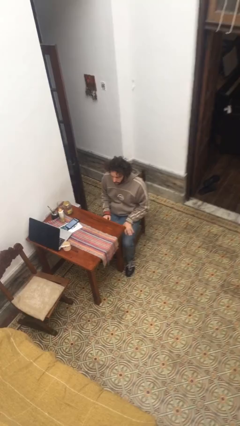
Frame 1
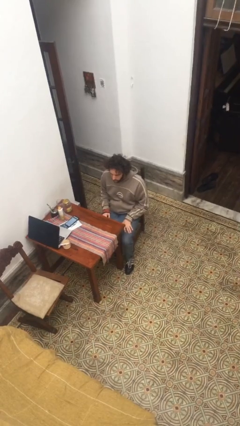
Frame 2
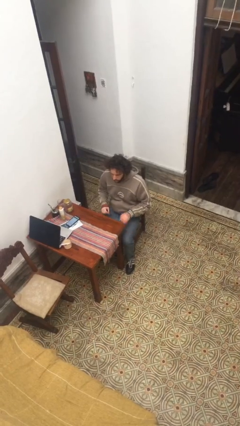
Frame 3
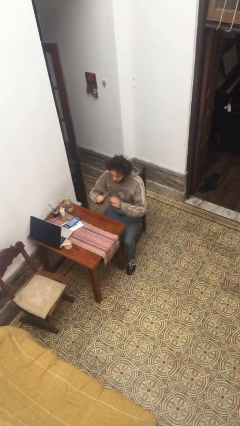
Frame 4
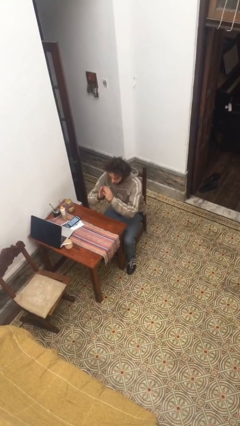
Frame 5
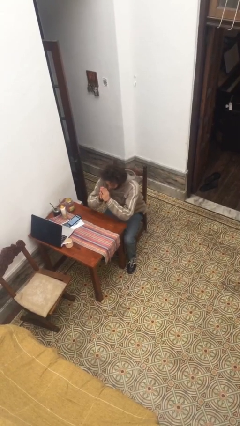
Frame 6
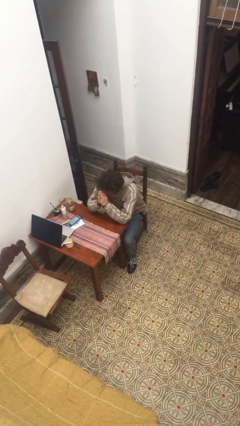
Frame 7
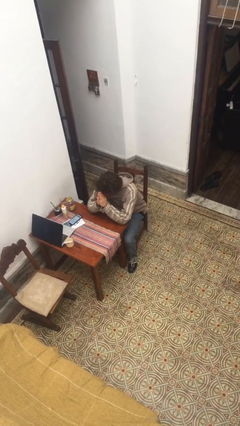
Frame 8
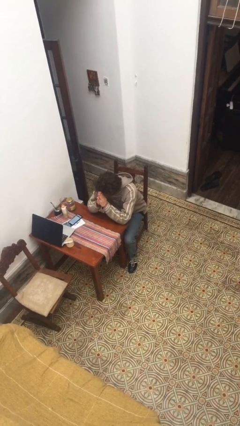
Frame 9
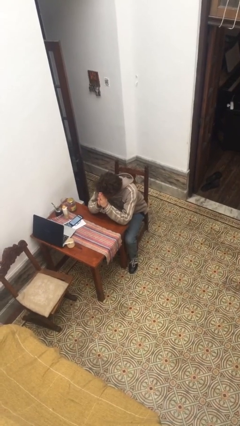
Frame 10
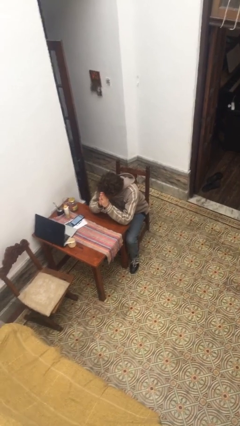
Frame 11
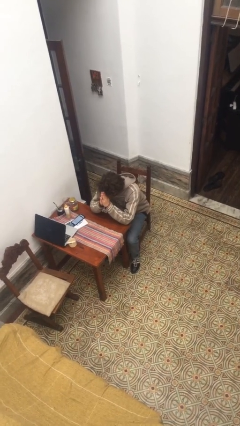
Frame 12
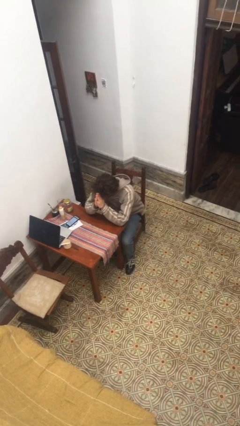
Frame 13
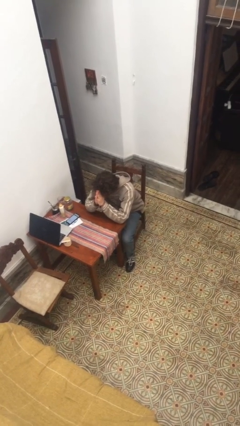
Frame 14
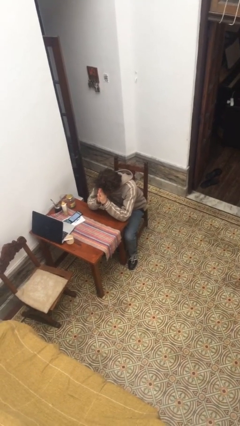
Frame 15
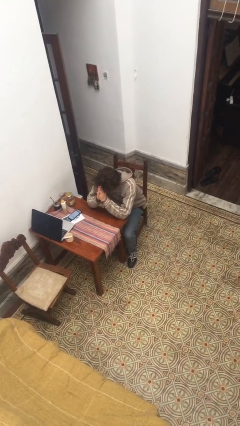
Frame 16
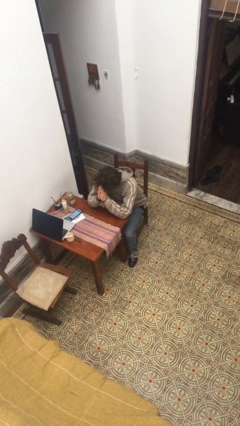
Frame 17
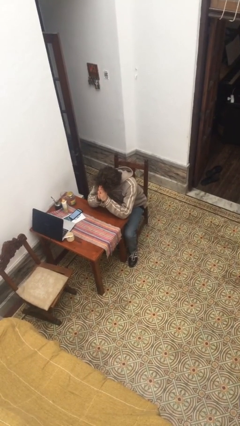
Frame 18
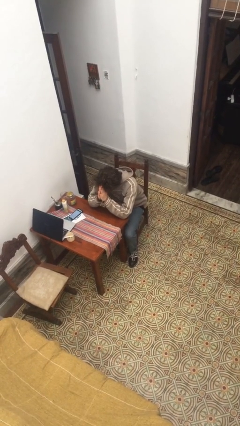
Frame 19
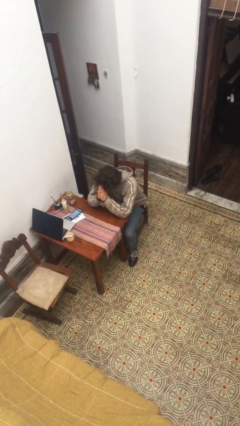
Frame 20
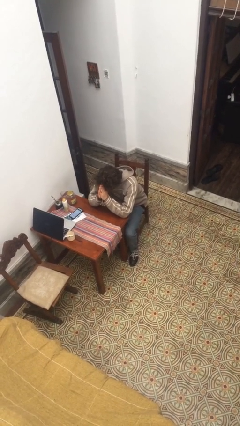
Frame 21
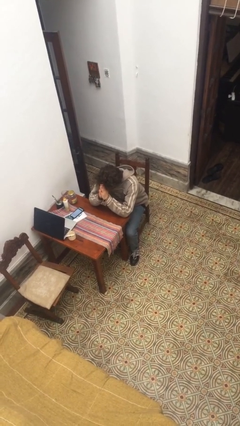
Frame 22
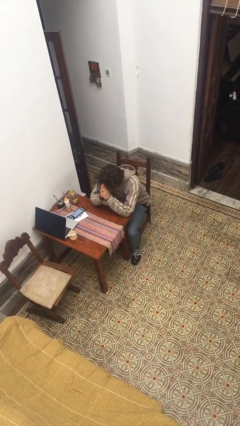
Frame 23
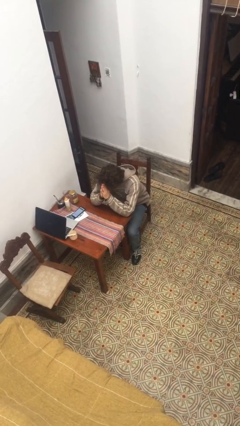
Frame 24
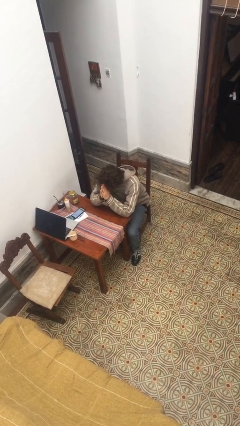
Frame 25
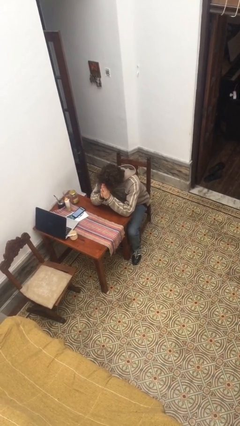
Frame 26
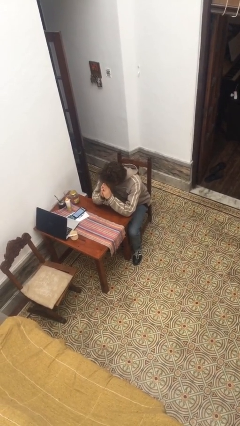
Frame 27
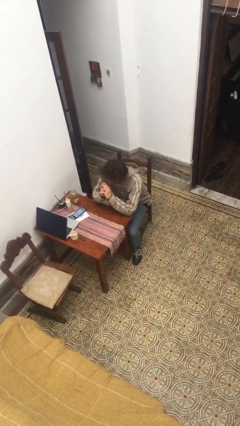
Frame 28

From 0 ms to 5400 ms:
person prays

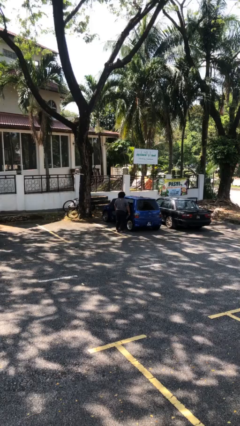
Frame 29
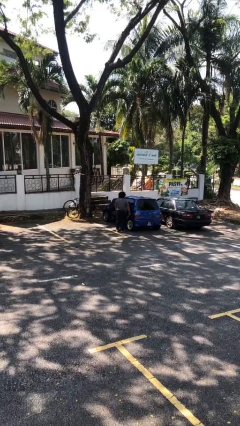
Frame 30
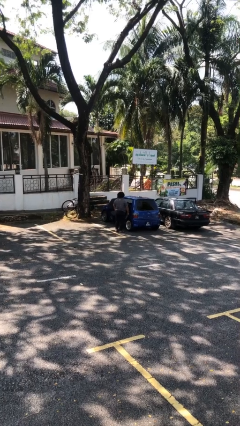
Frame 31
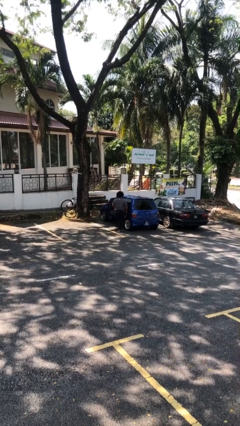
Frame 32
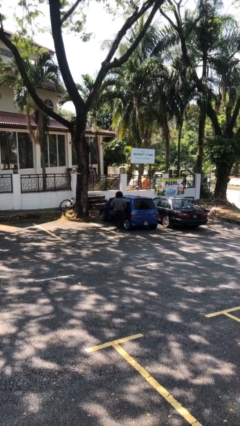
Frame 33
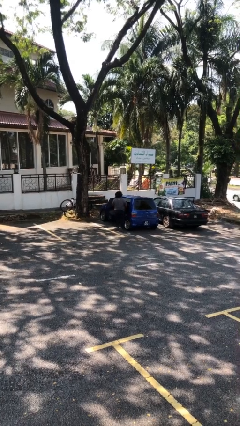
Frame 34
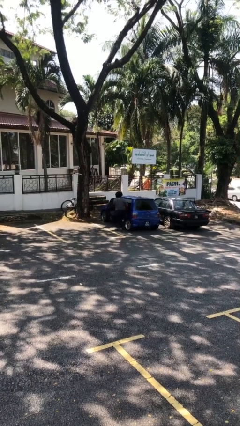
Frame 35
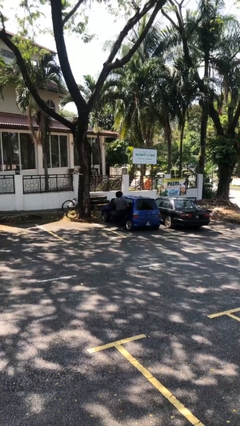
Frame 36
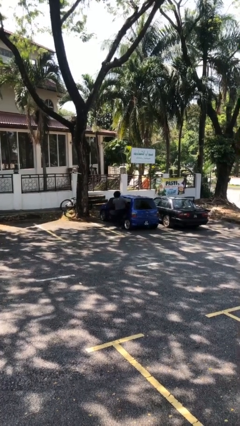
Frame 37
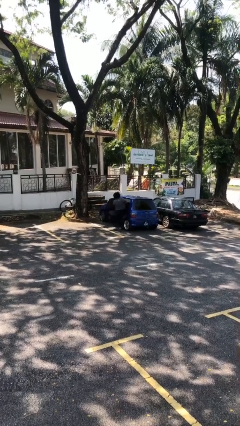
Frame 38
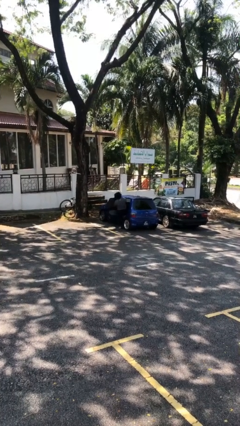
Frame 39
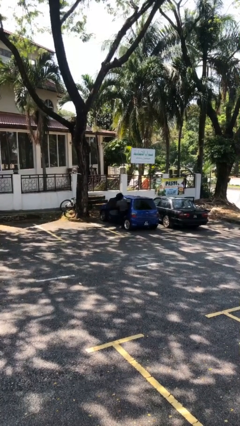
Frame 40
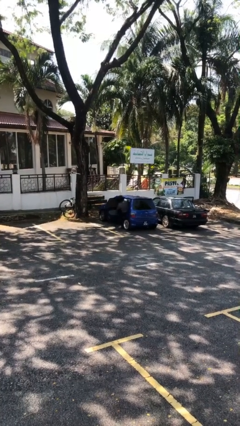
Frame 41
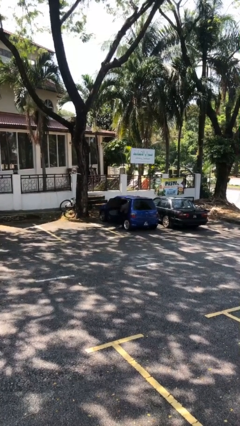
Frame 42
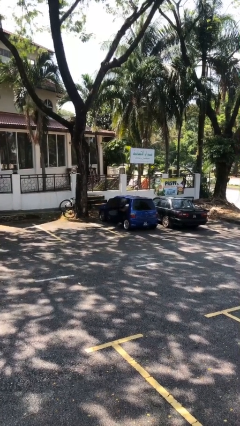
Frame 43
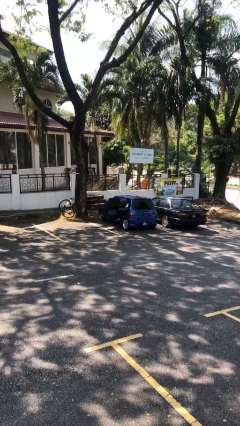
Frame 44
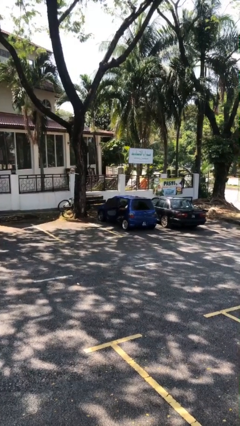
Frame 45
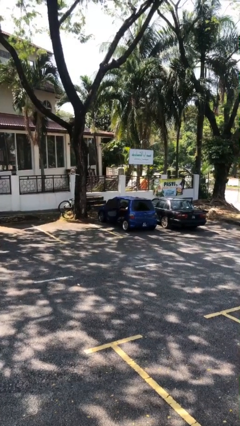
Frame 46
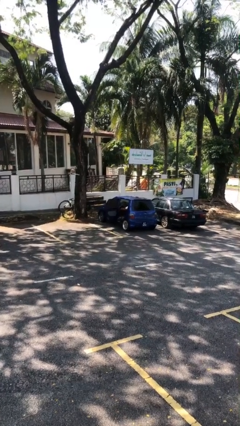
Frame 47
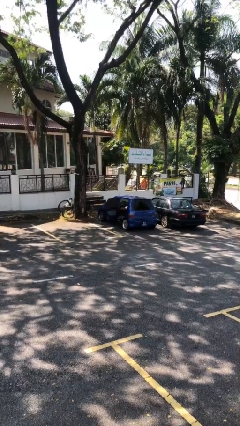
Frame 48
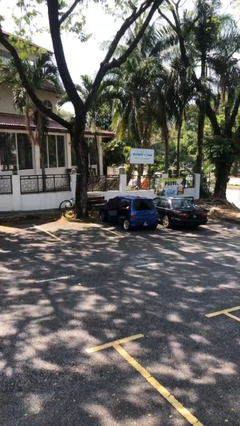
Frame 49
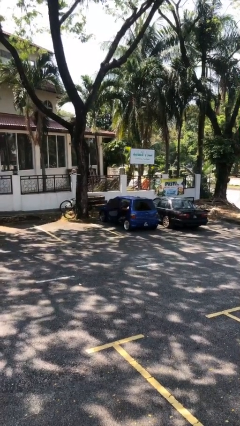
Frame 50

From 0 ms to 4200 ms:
person enters car

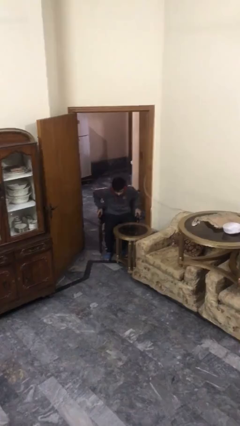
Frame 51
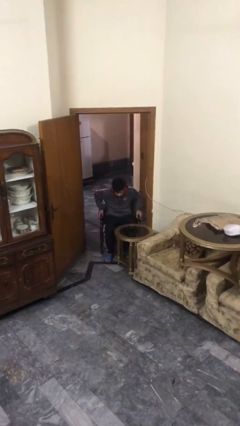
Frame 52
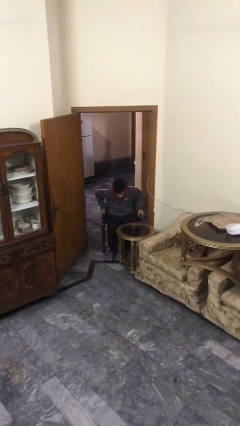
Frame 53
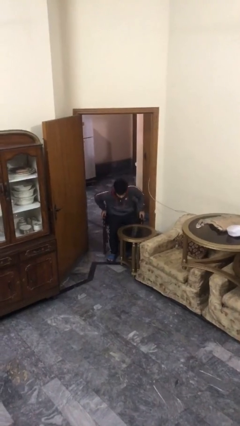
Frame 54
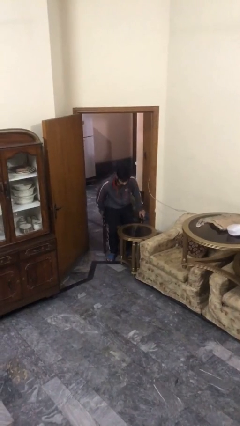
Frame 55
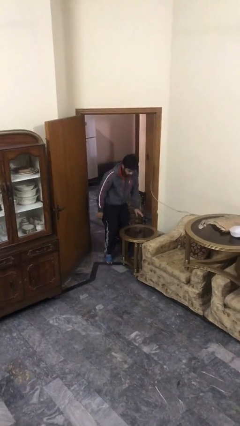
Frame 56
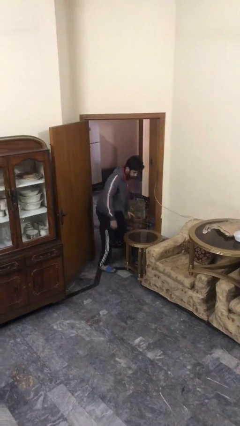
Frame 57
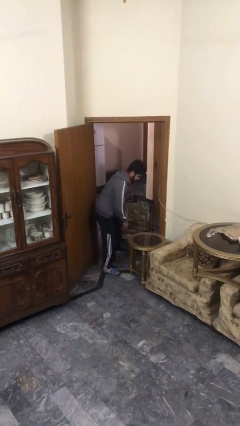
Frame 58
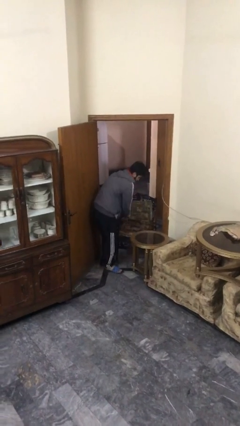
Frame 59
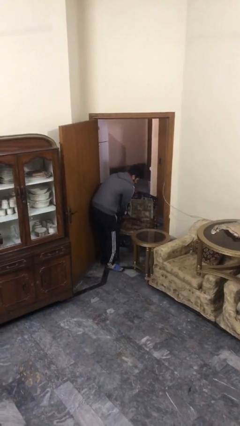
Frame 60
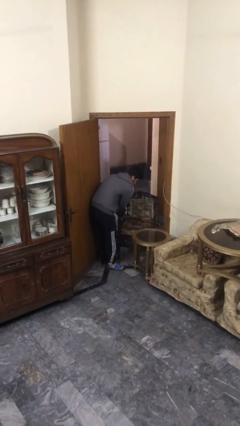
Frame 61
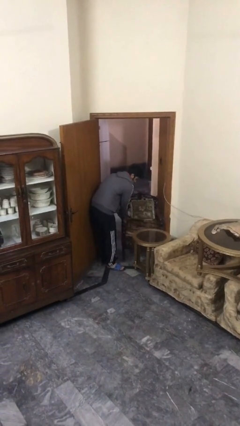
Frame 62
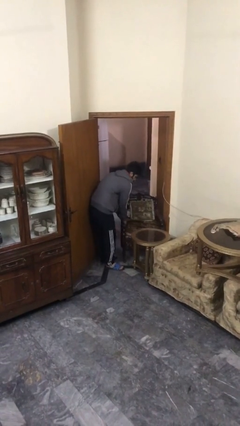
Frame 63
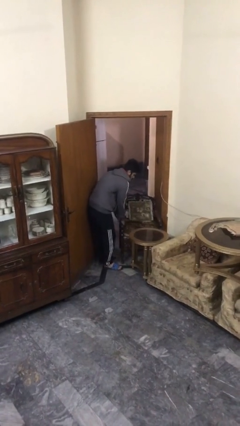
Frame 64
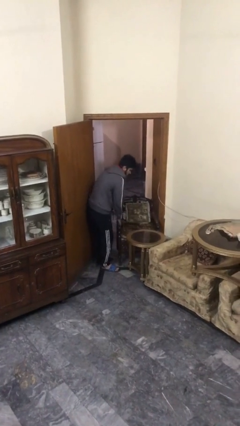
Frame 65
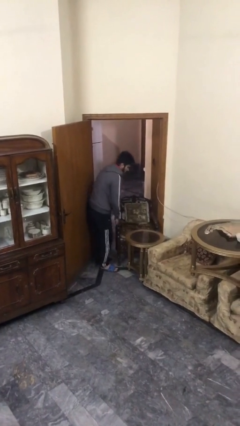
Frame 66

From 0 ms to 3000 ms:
person stands up

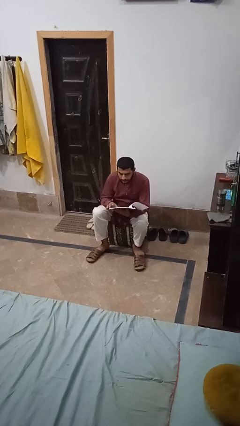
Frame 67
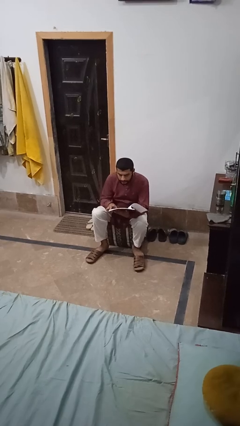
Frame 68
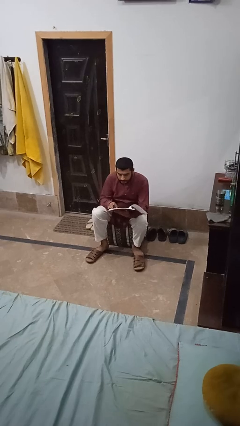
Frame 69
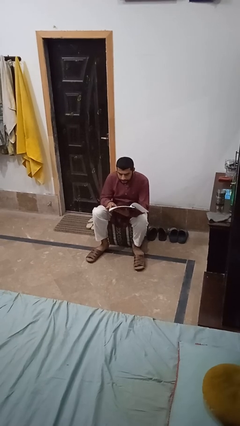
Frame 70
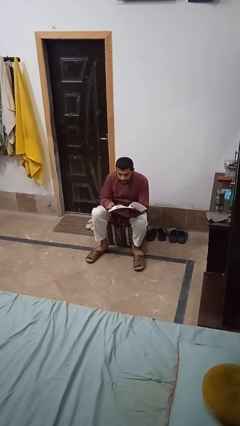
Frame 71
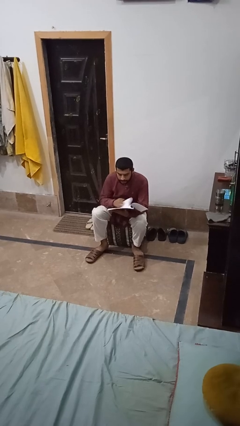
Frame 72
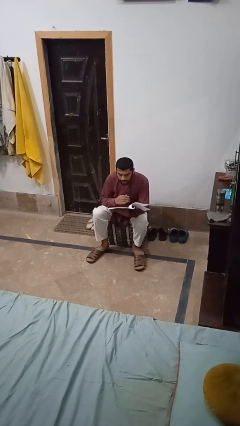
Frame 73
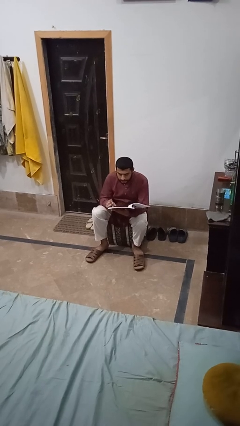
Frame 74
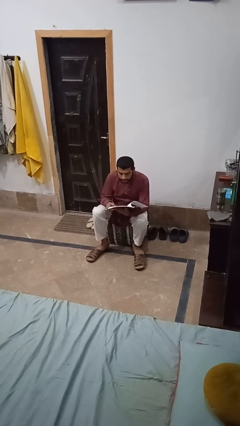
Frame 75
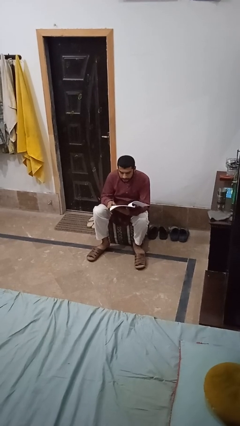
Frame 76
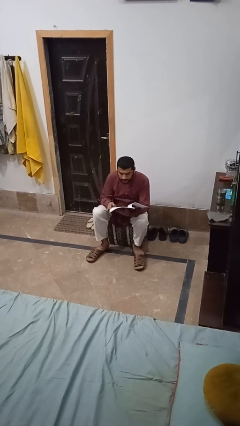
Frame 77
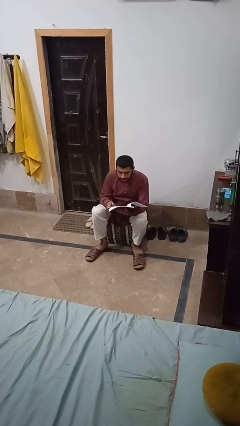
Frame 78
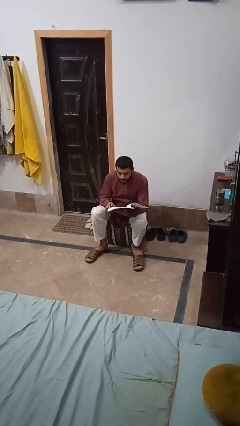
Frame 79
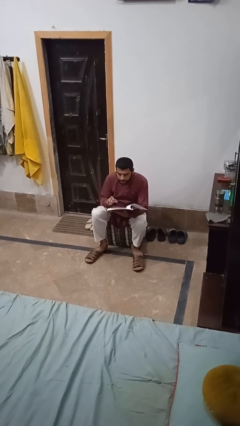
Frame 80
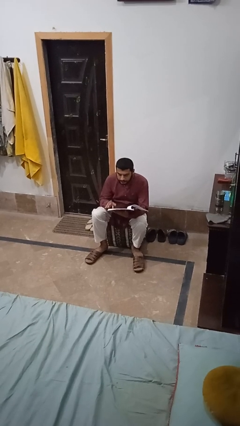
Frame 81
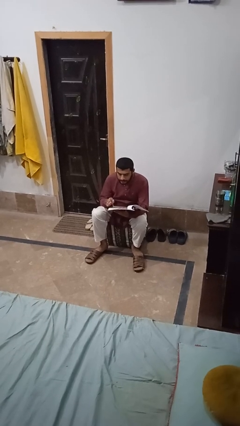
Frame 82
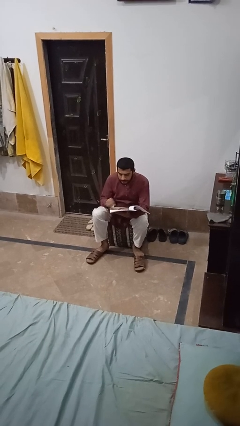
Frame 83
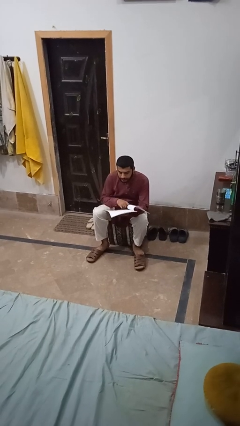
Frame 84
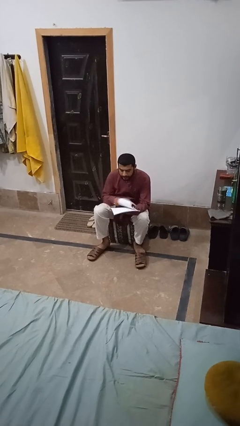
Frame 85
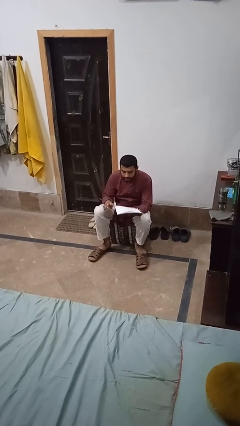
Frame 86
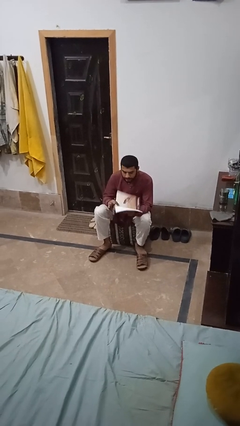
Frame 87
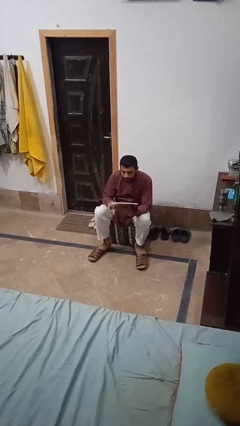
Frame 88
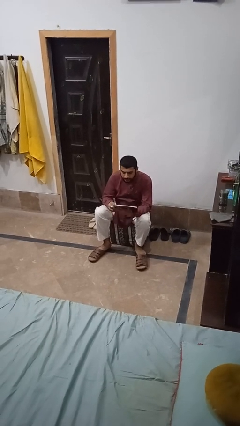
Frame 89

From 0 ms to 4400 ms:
person stands up from floor

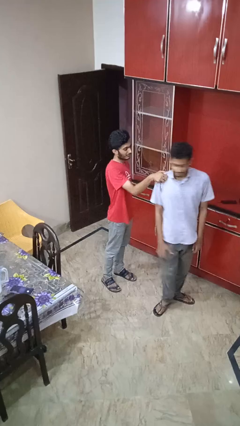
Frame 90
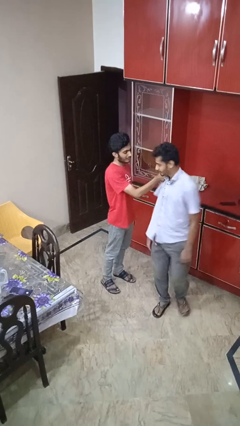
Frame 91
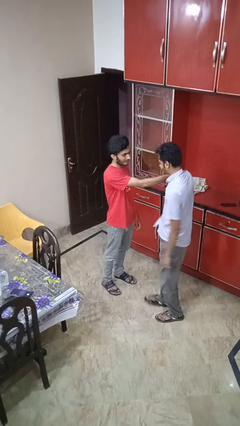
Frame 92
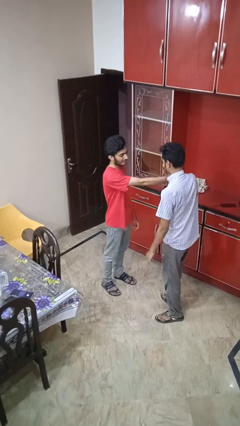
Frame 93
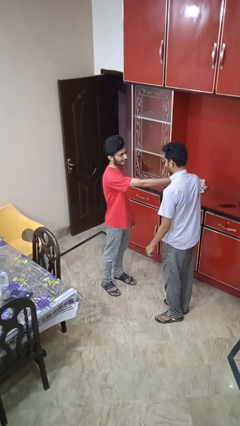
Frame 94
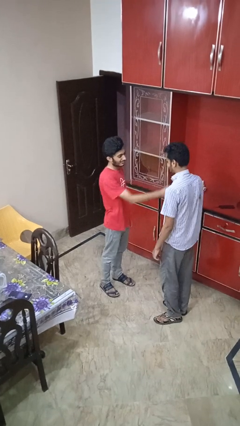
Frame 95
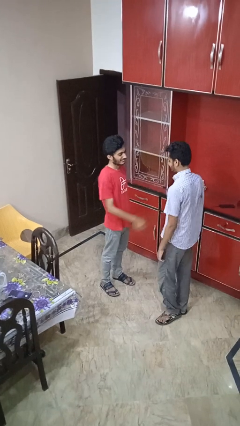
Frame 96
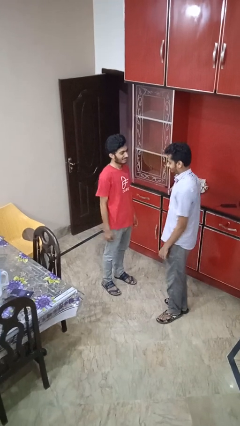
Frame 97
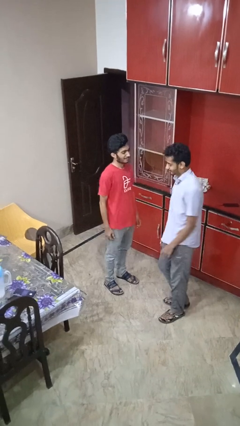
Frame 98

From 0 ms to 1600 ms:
person spins person around
